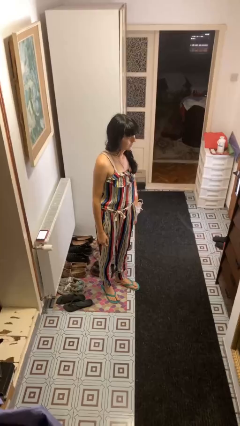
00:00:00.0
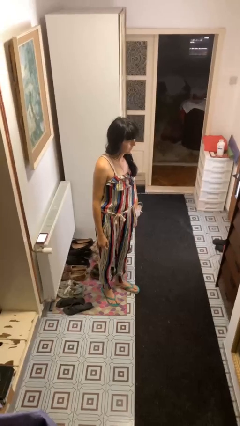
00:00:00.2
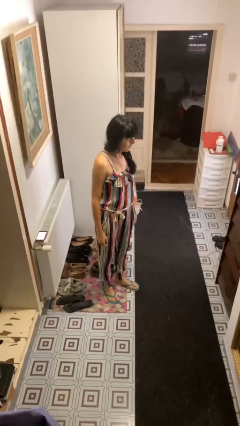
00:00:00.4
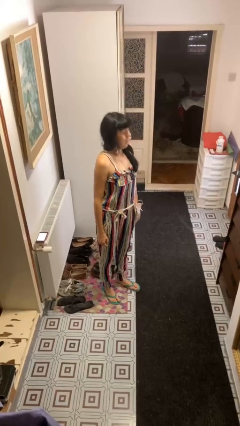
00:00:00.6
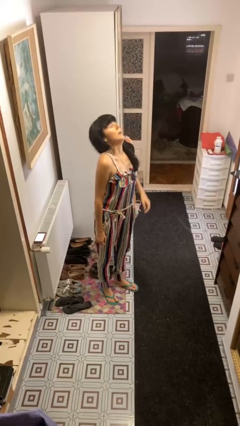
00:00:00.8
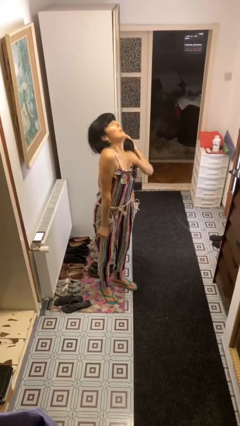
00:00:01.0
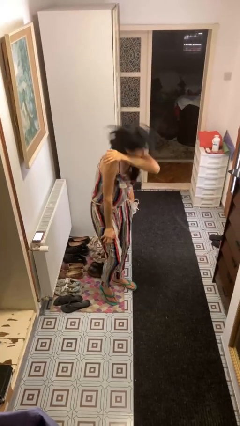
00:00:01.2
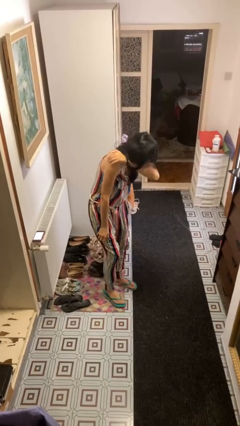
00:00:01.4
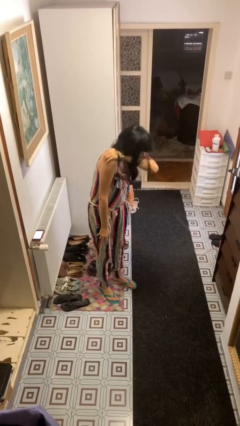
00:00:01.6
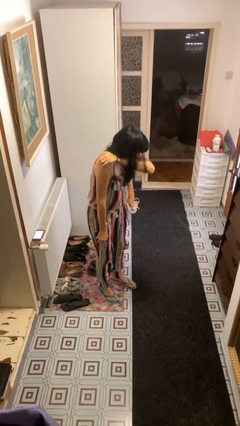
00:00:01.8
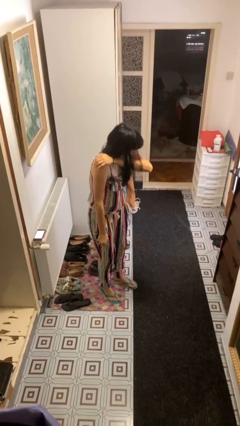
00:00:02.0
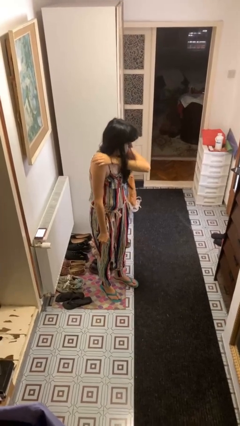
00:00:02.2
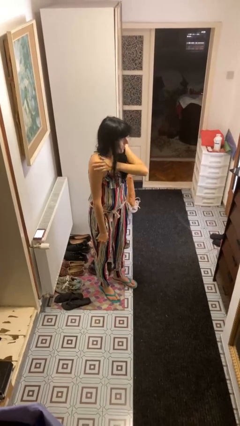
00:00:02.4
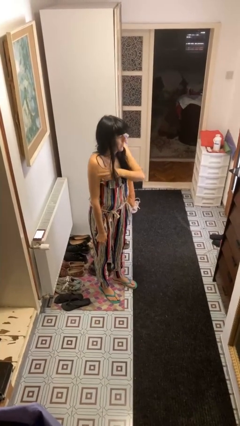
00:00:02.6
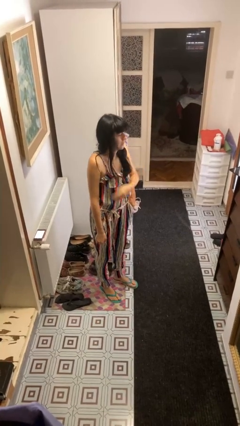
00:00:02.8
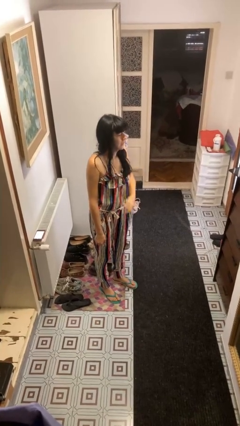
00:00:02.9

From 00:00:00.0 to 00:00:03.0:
person sneezes into arm

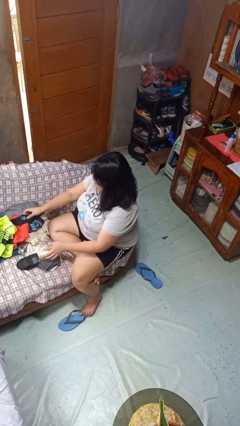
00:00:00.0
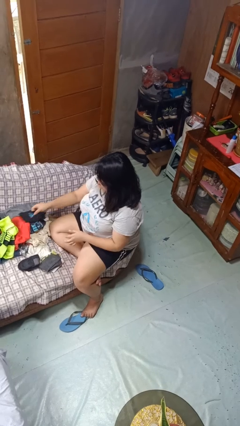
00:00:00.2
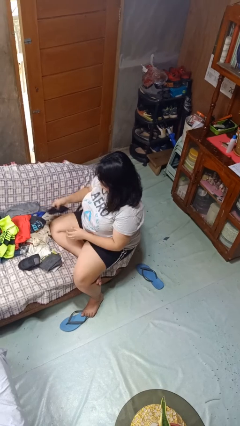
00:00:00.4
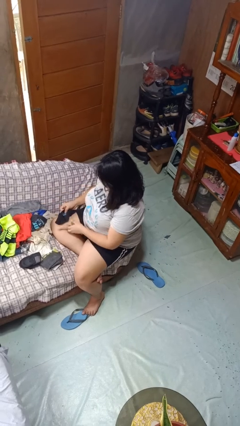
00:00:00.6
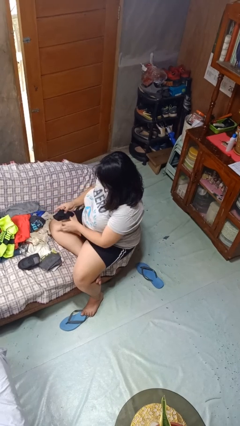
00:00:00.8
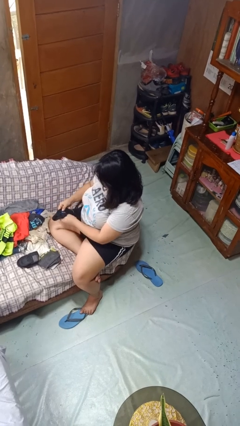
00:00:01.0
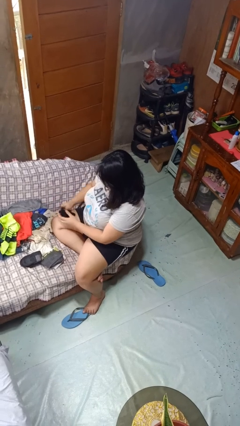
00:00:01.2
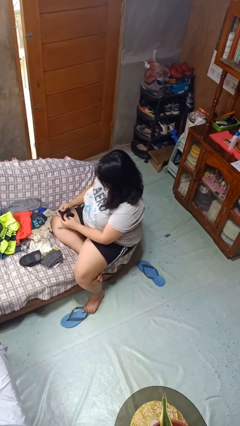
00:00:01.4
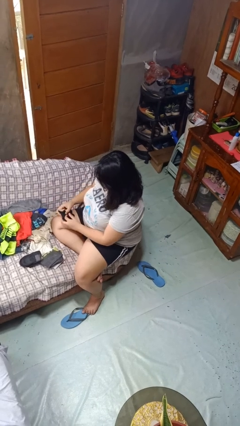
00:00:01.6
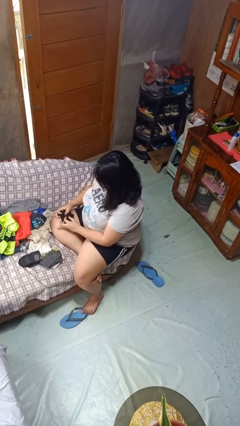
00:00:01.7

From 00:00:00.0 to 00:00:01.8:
person folds socks

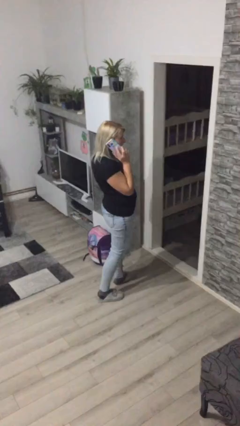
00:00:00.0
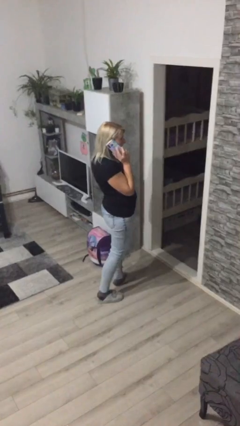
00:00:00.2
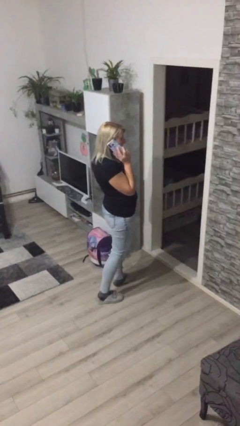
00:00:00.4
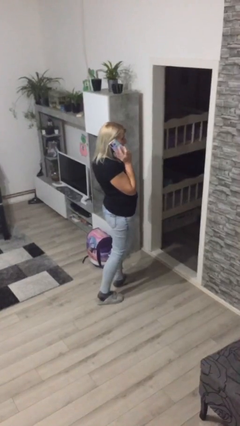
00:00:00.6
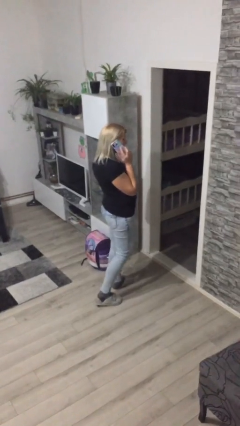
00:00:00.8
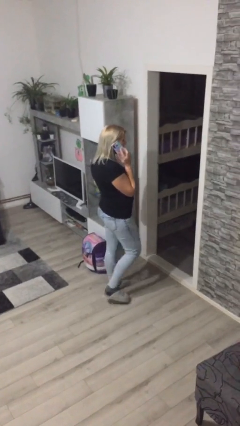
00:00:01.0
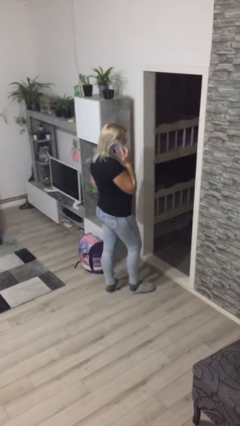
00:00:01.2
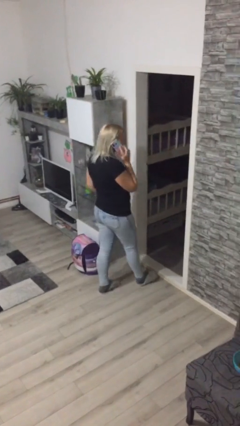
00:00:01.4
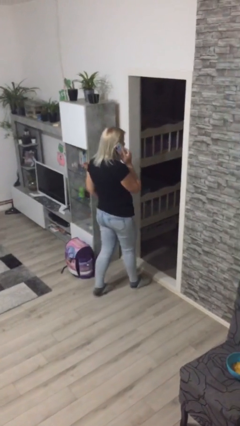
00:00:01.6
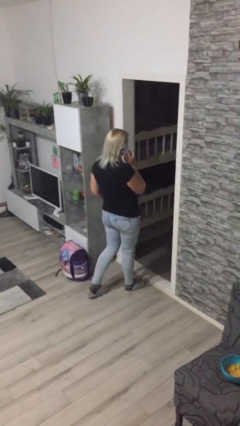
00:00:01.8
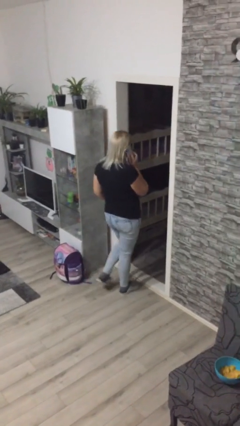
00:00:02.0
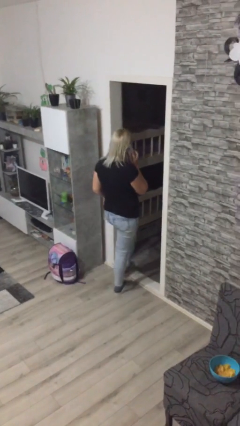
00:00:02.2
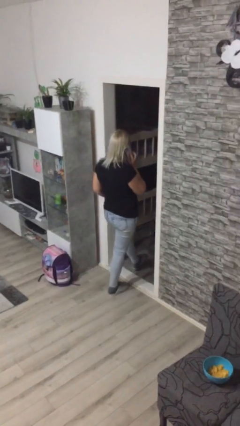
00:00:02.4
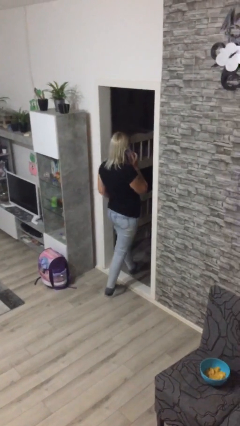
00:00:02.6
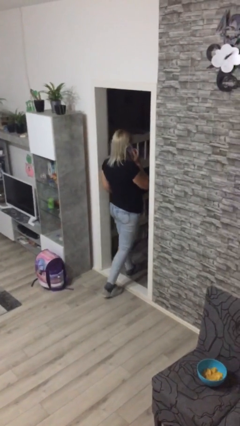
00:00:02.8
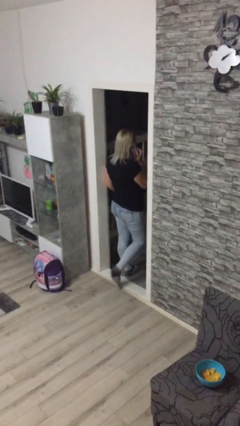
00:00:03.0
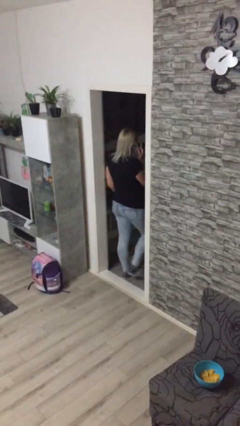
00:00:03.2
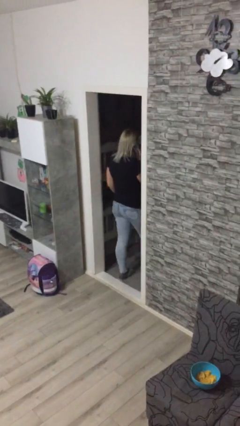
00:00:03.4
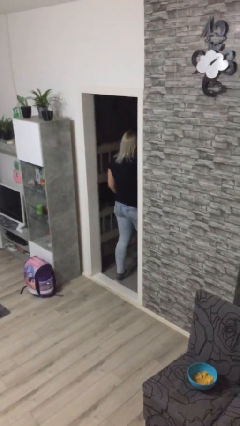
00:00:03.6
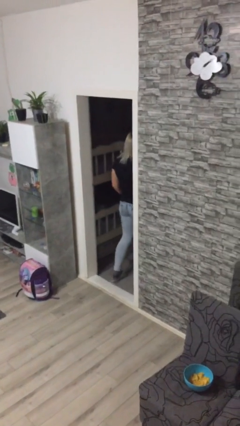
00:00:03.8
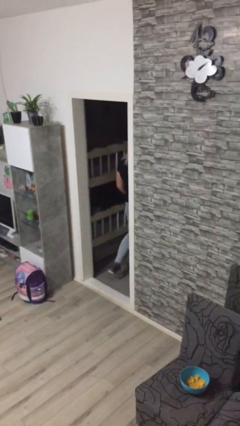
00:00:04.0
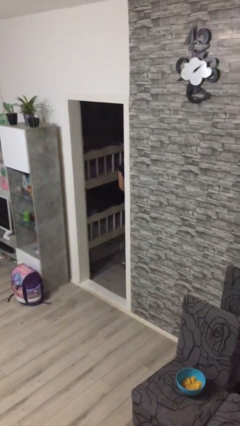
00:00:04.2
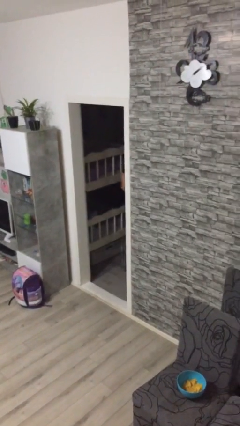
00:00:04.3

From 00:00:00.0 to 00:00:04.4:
person exits scene through structure

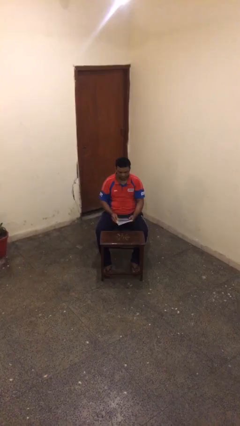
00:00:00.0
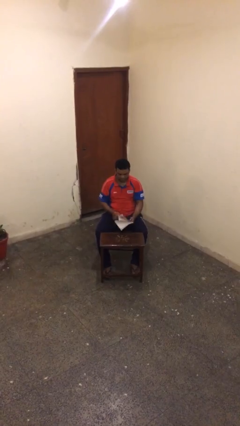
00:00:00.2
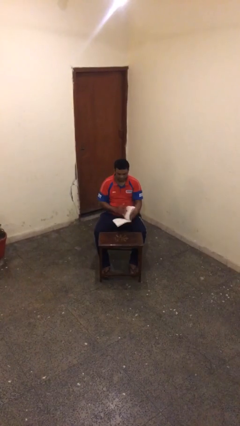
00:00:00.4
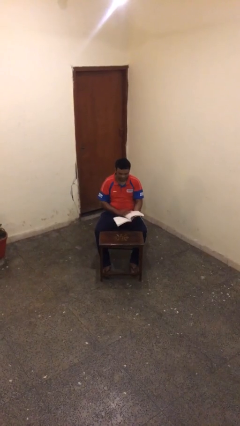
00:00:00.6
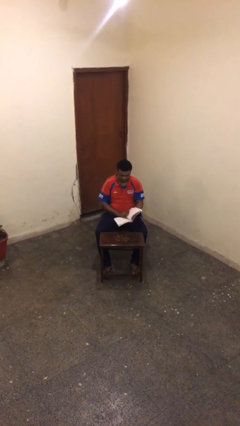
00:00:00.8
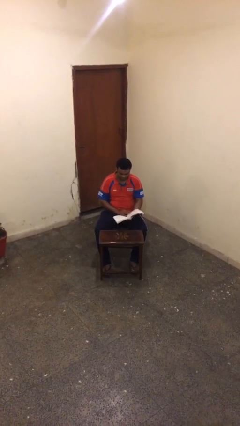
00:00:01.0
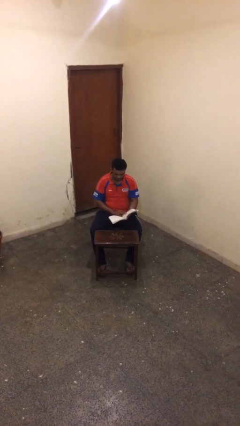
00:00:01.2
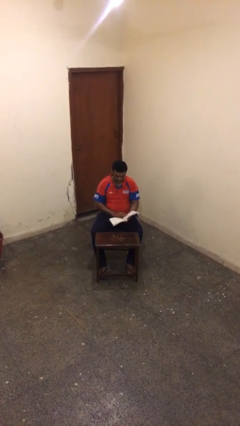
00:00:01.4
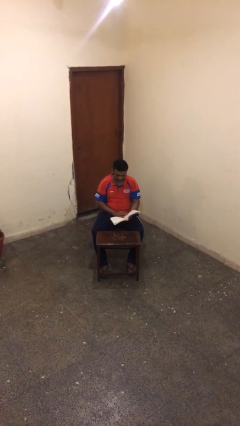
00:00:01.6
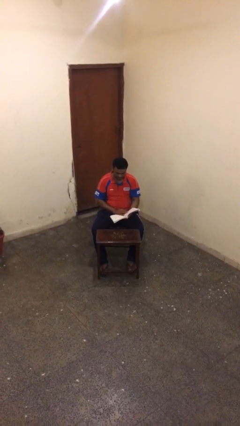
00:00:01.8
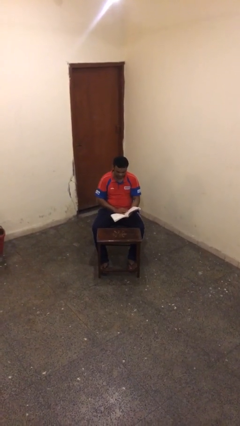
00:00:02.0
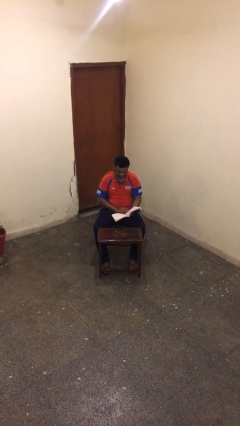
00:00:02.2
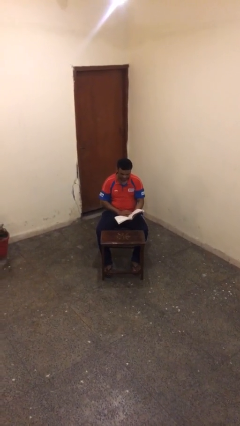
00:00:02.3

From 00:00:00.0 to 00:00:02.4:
person reads document

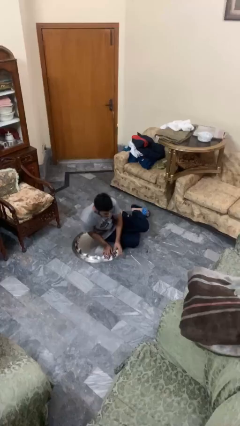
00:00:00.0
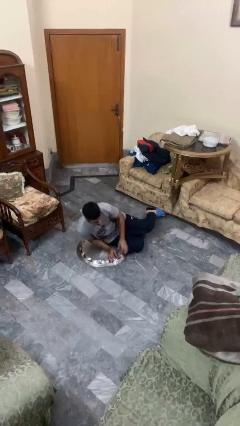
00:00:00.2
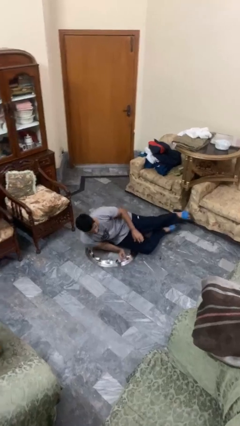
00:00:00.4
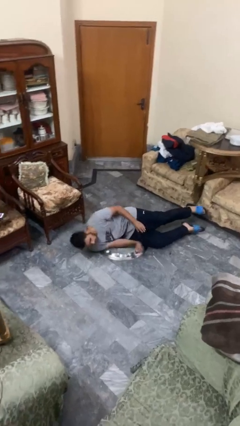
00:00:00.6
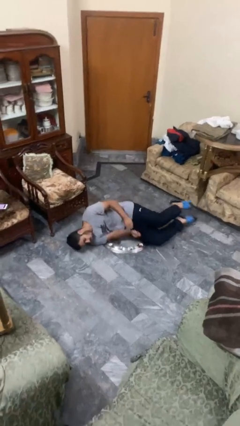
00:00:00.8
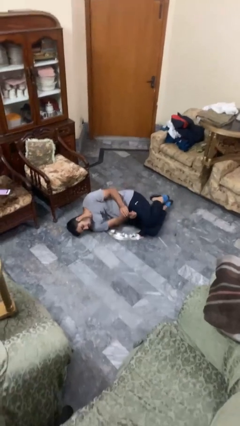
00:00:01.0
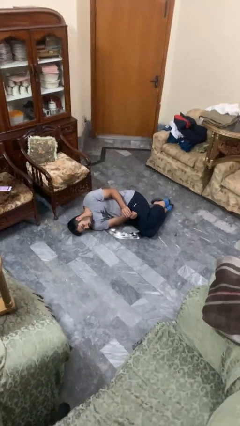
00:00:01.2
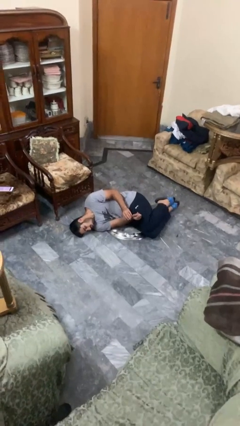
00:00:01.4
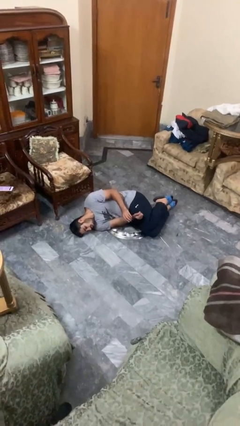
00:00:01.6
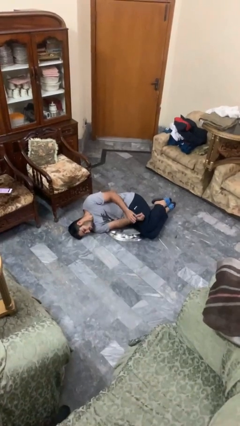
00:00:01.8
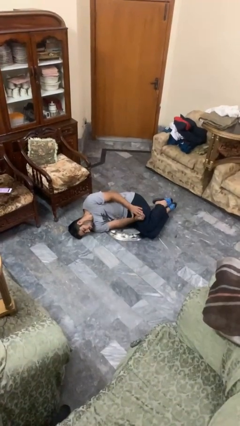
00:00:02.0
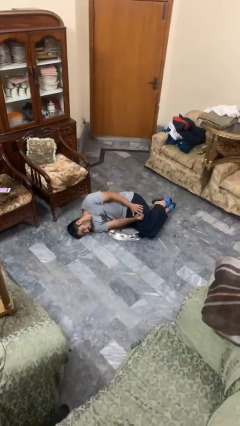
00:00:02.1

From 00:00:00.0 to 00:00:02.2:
person lies down on floor

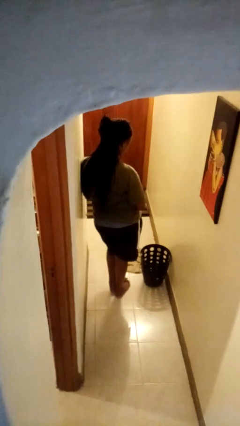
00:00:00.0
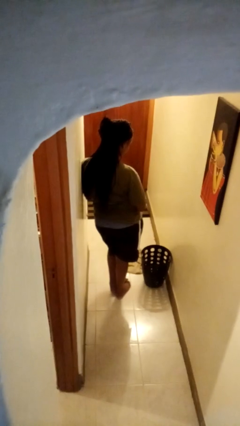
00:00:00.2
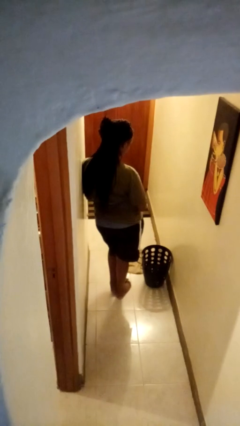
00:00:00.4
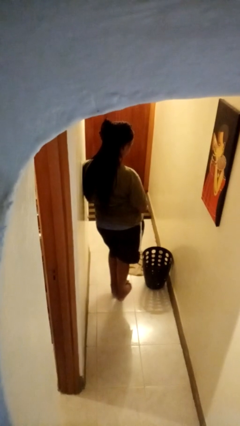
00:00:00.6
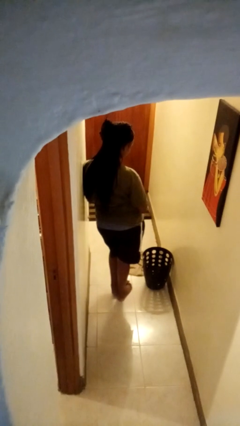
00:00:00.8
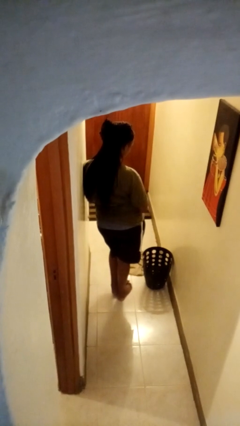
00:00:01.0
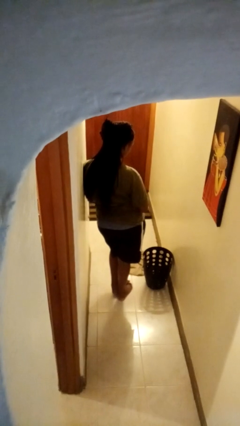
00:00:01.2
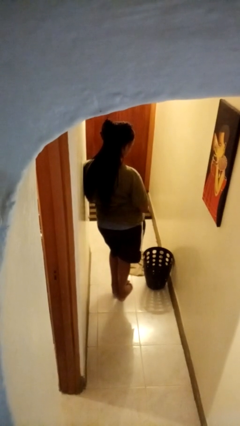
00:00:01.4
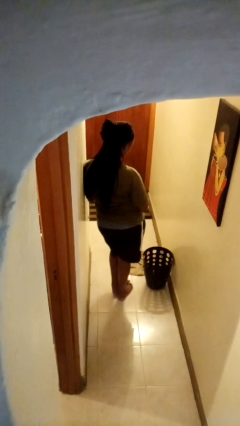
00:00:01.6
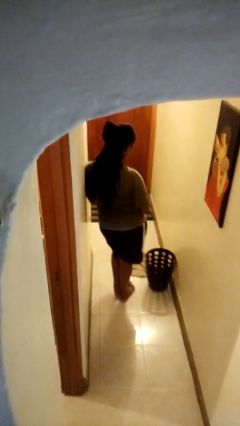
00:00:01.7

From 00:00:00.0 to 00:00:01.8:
person discards trash

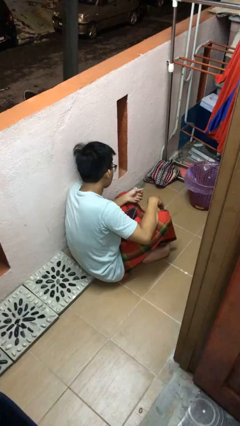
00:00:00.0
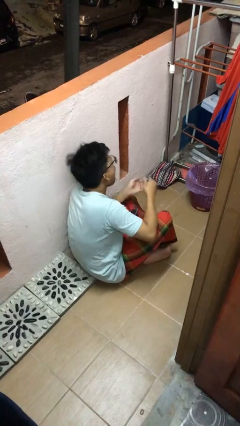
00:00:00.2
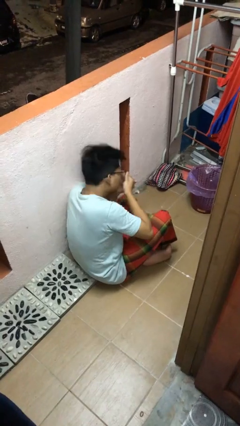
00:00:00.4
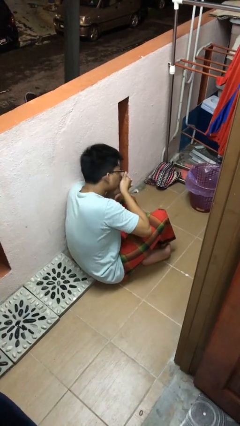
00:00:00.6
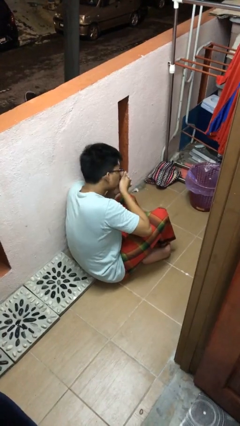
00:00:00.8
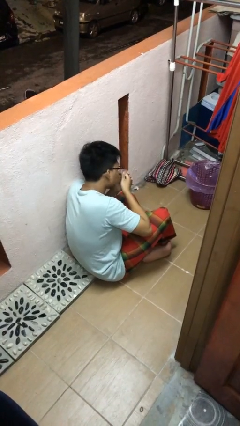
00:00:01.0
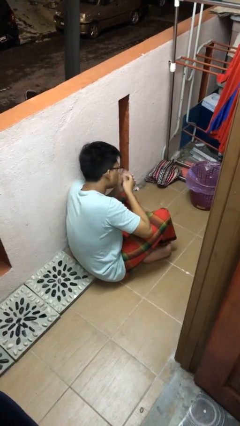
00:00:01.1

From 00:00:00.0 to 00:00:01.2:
person sneezes into hand
